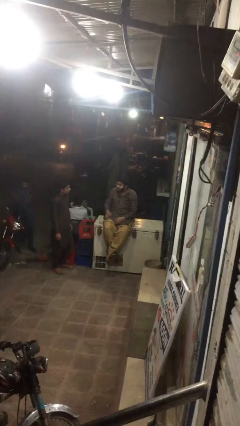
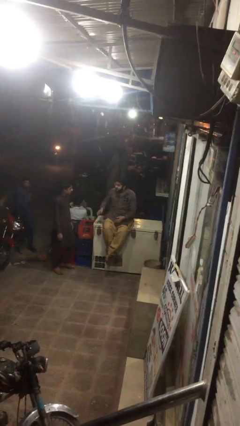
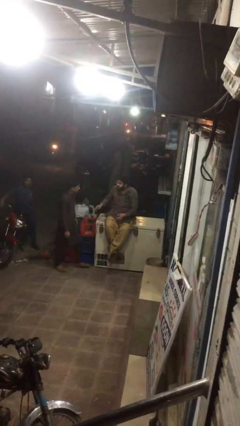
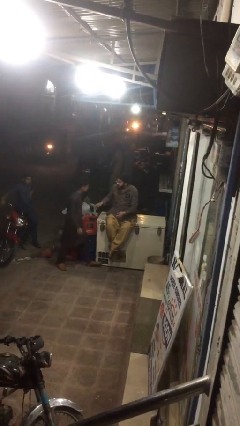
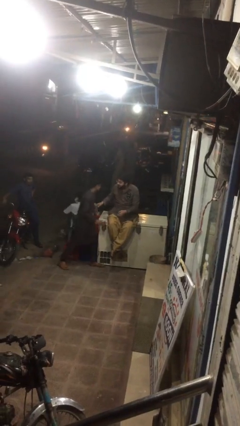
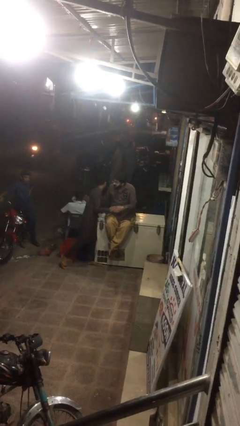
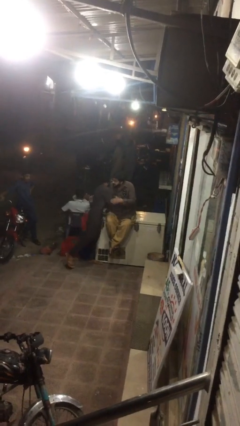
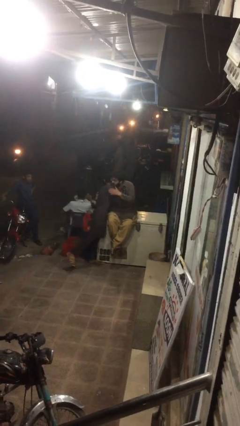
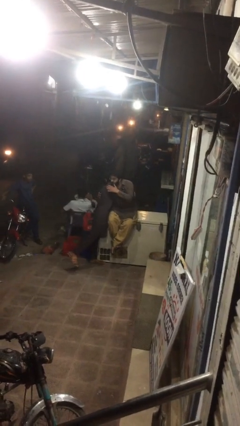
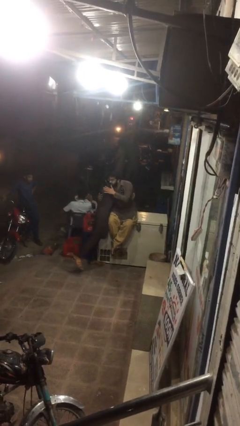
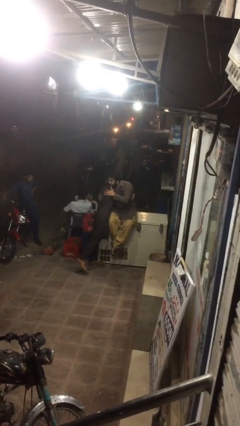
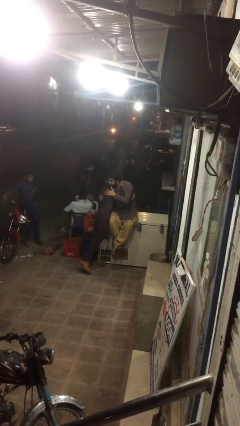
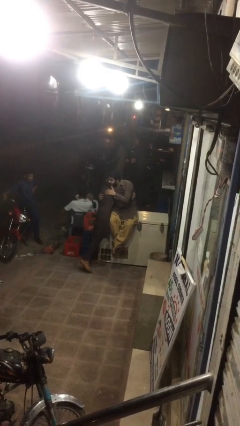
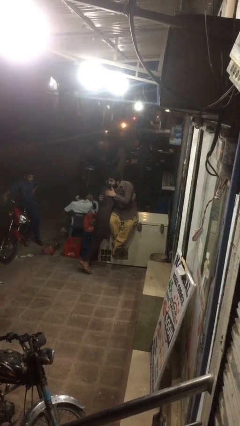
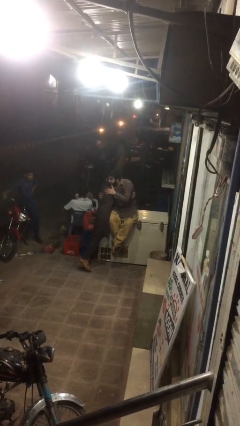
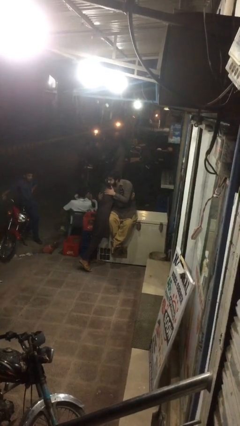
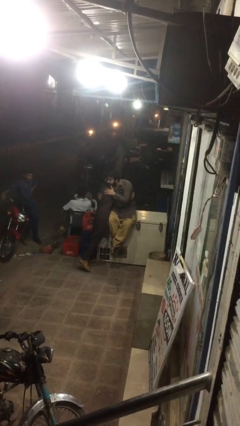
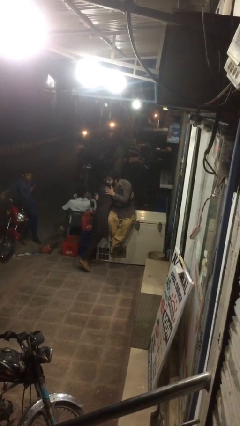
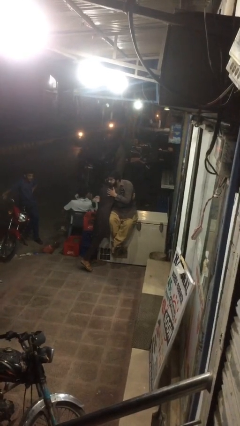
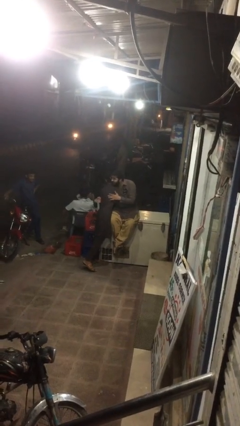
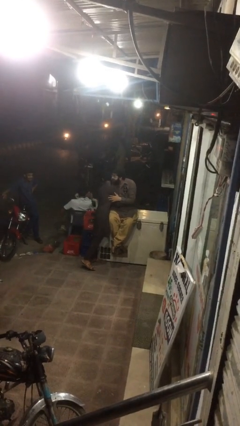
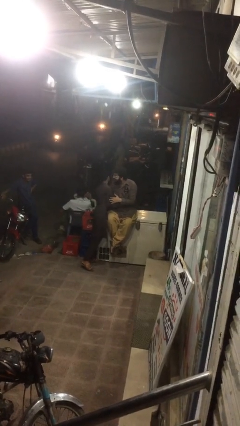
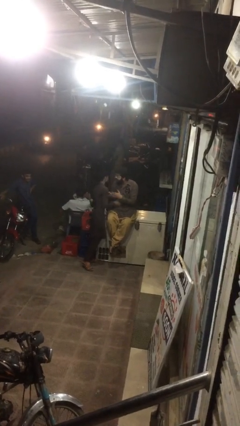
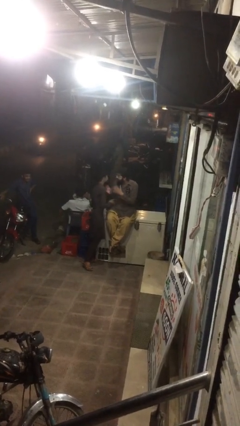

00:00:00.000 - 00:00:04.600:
person embraces person

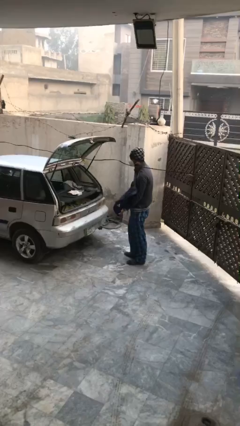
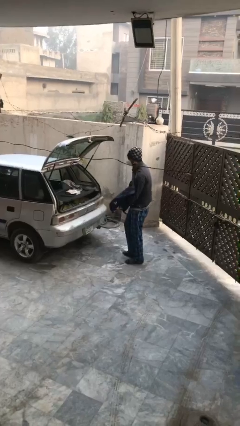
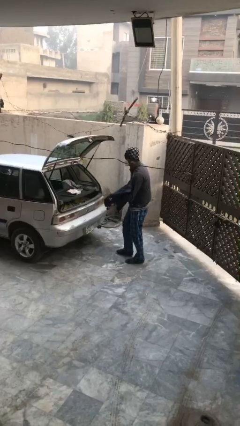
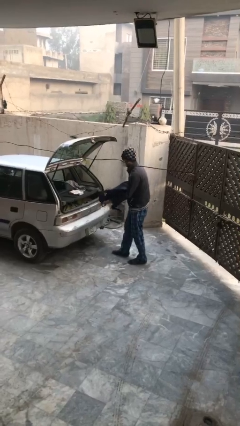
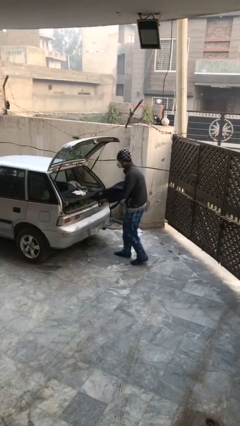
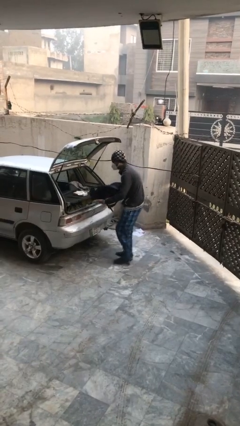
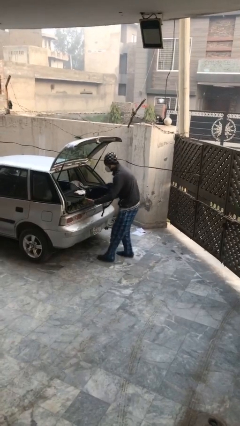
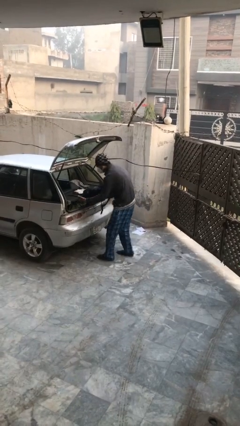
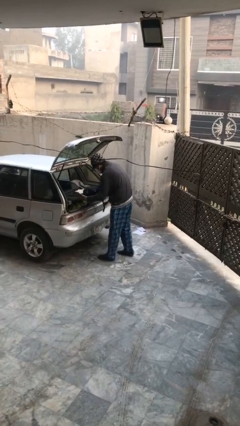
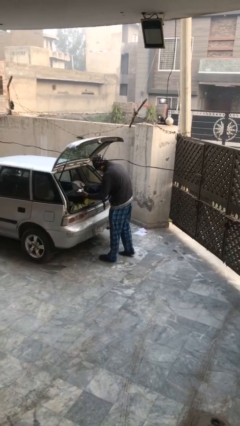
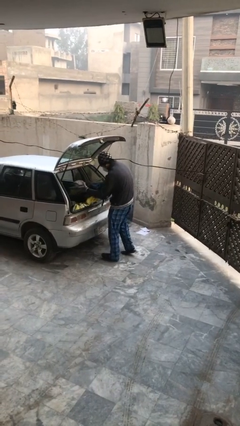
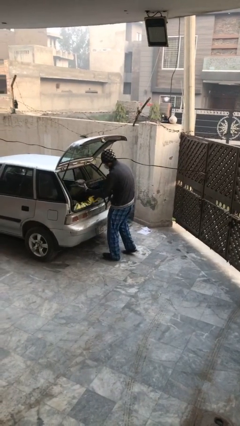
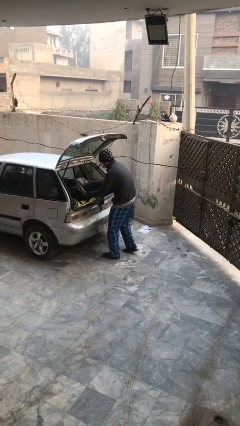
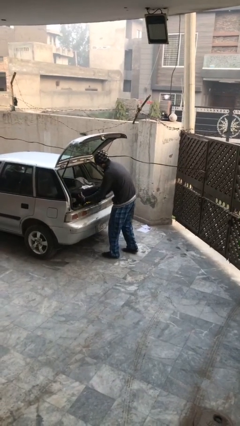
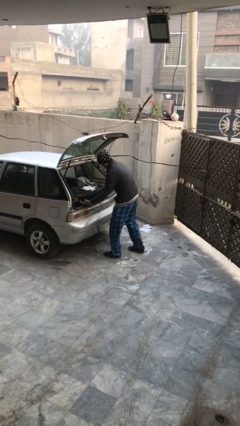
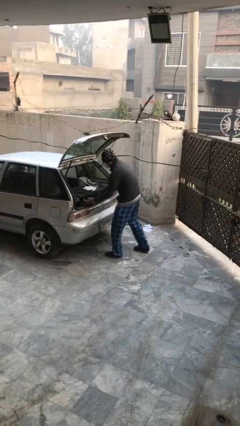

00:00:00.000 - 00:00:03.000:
person loads car

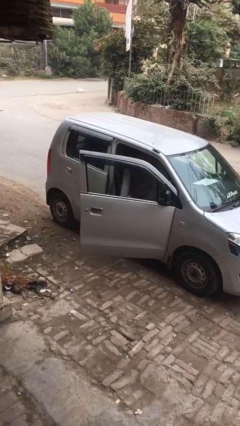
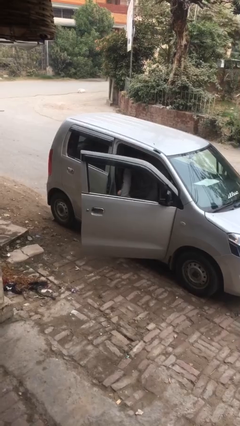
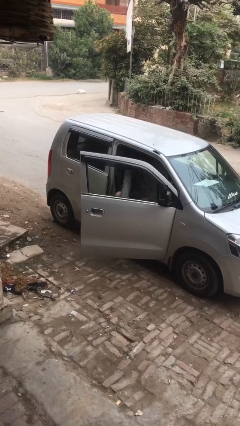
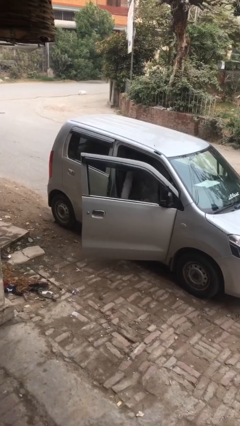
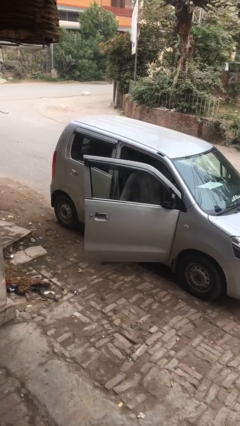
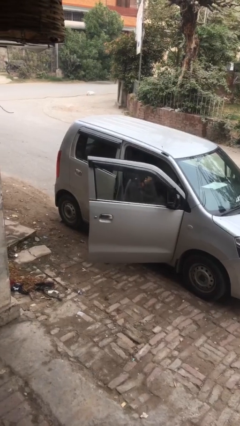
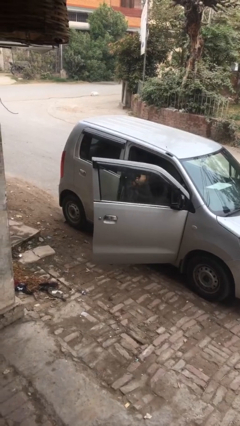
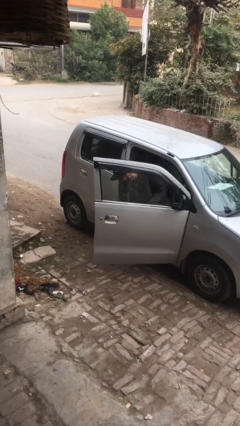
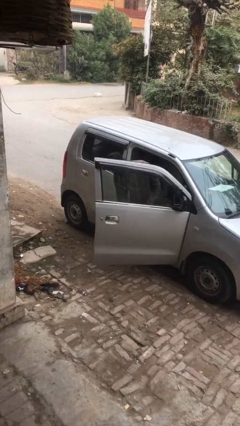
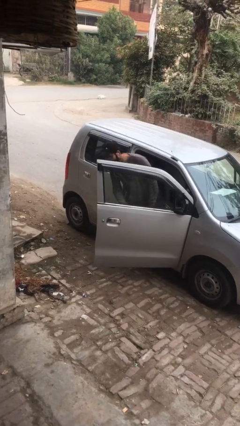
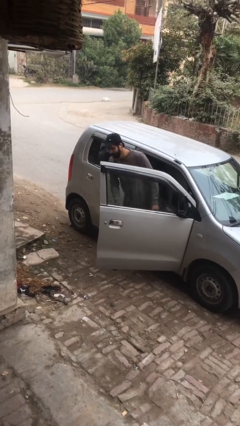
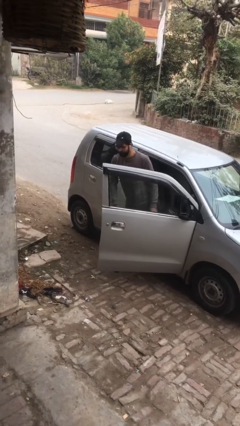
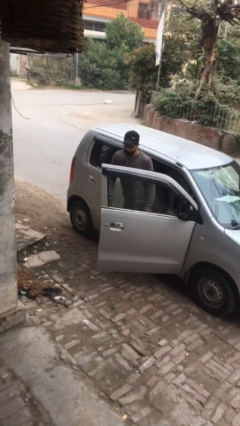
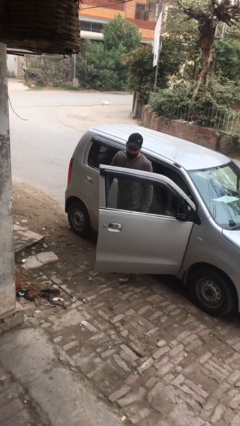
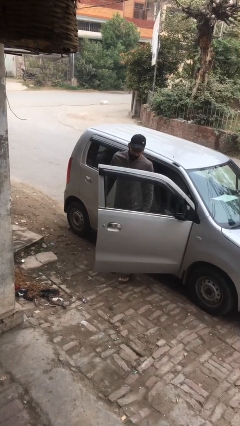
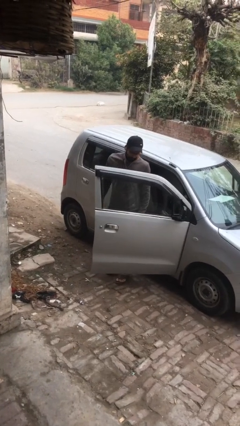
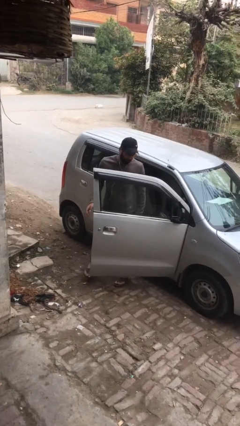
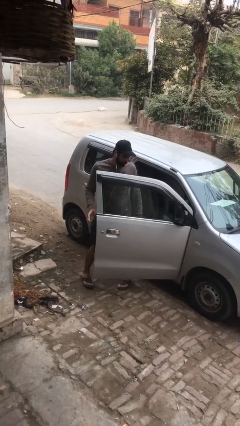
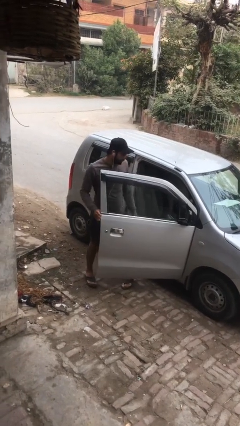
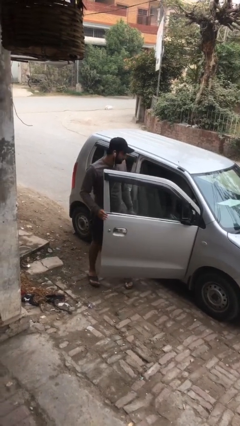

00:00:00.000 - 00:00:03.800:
person exits car

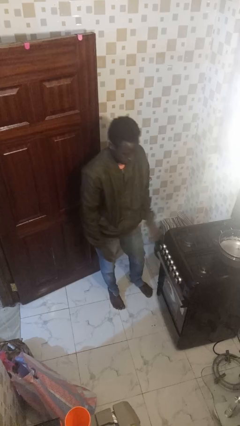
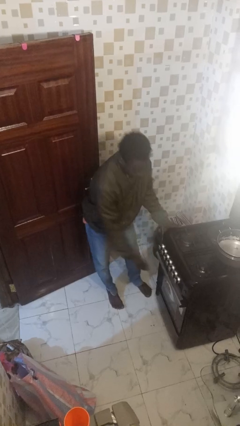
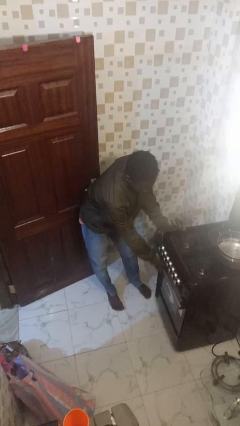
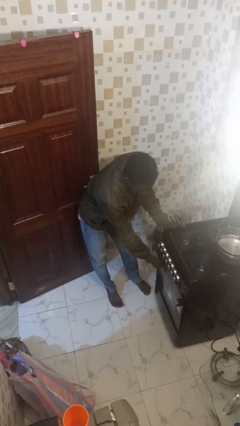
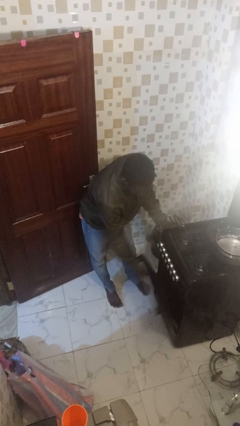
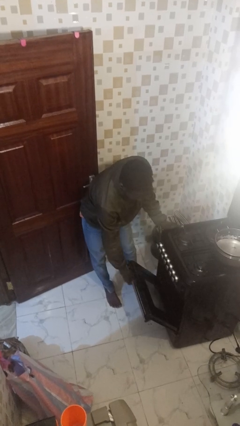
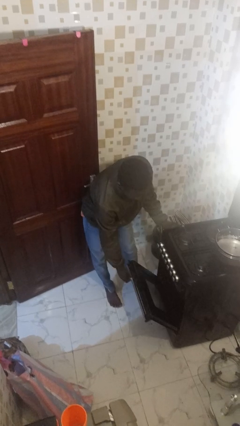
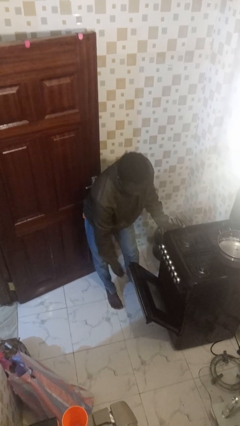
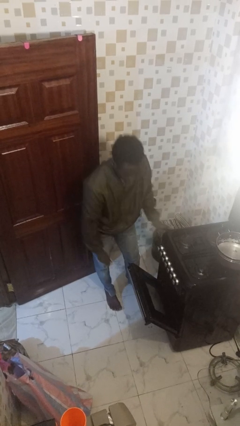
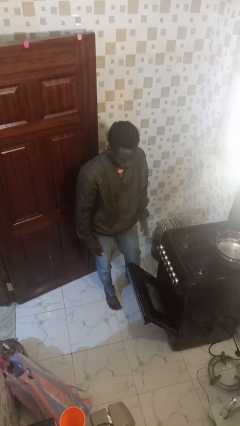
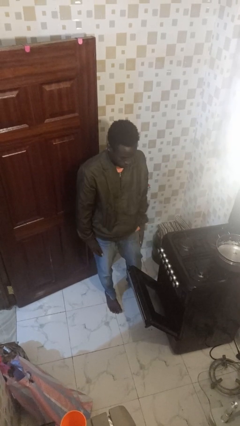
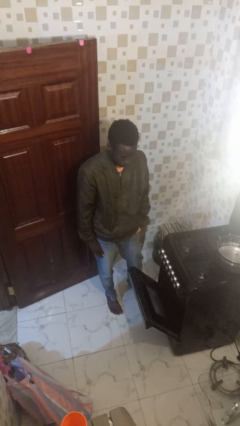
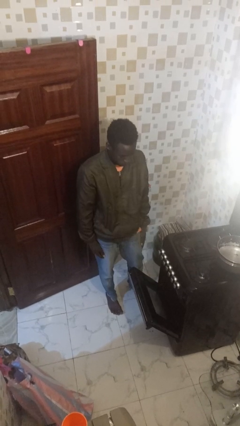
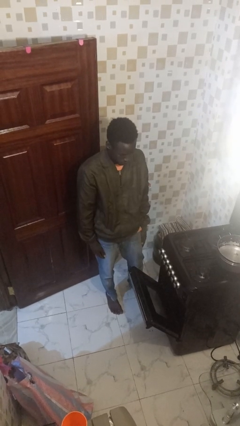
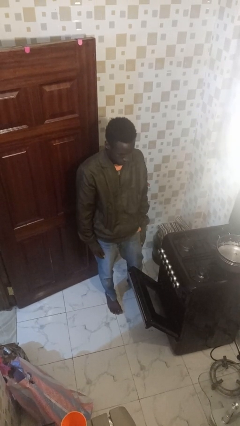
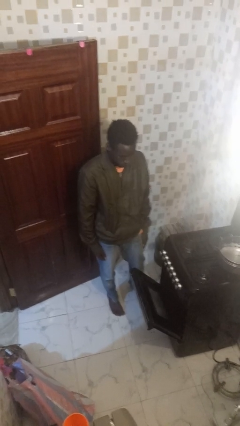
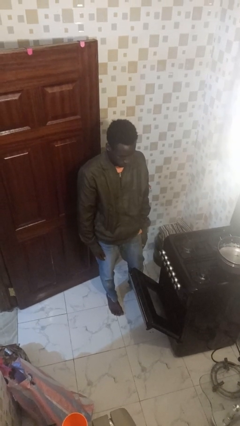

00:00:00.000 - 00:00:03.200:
person opens oven door

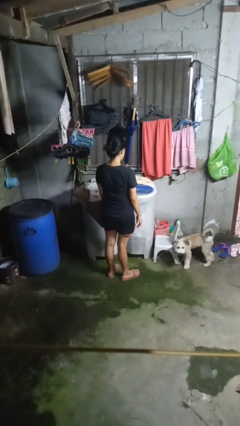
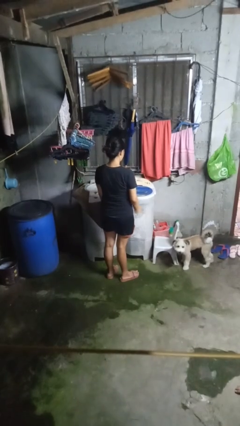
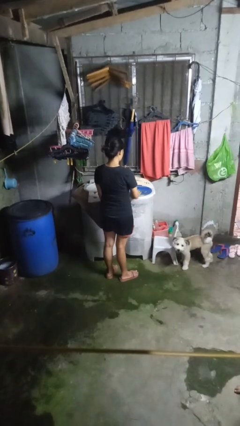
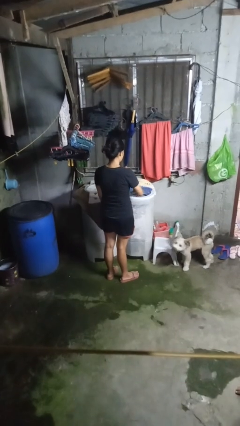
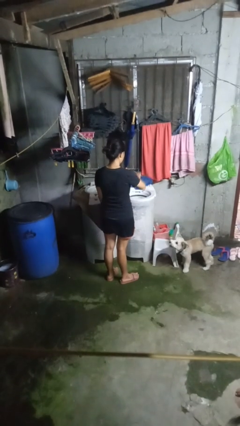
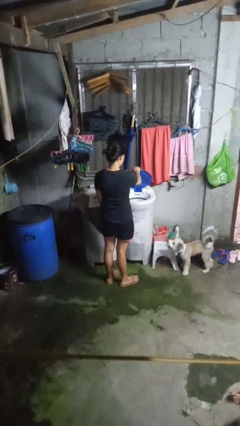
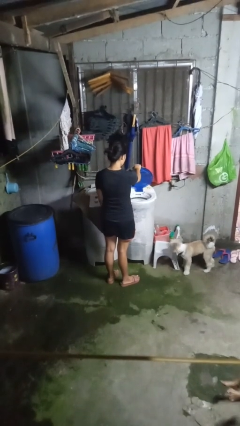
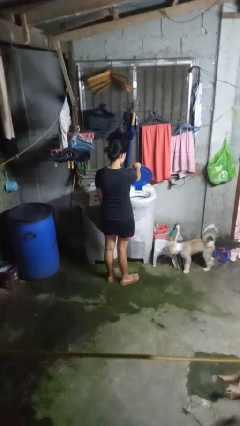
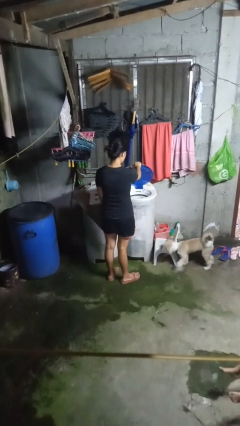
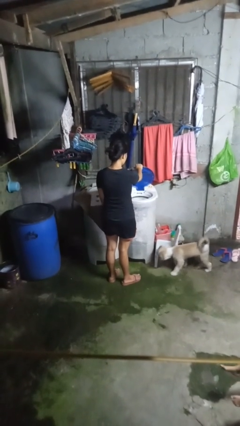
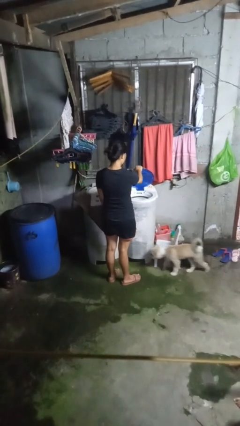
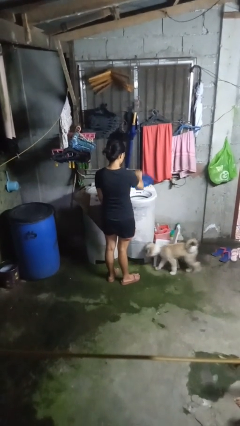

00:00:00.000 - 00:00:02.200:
person opens clothes washer

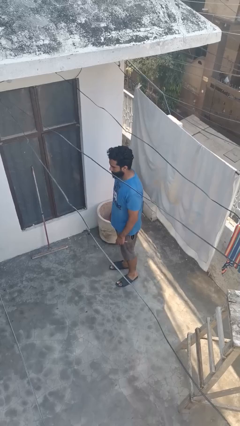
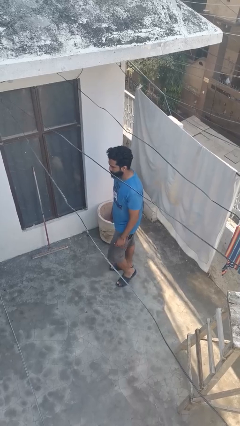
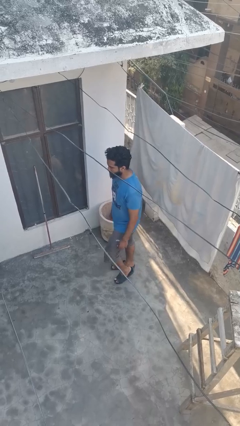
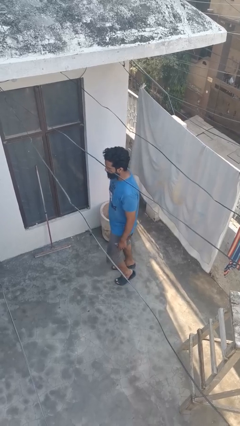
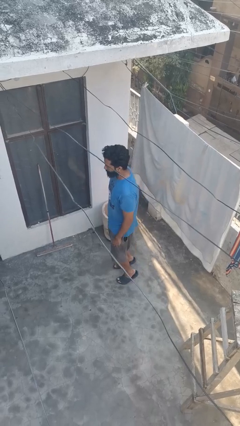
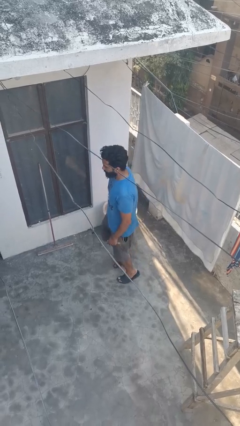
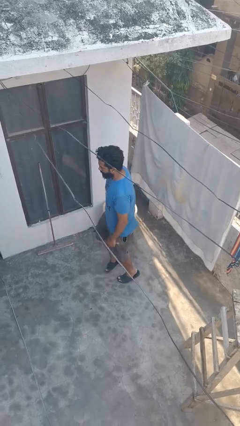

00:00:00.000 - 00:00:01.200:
person walks tiptoe
